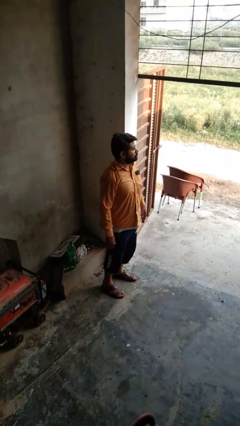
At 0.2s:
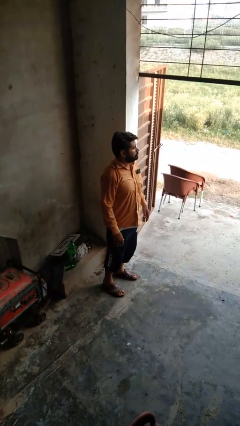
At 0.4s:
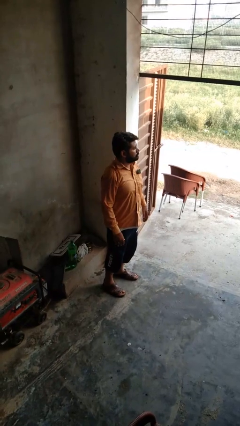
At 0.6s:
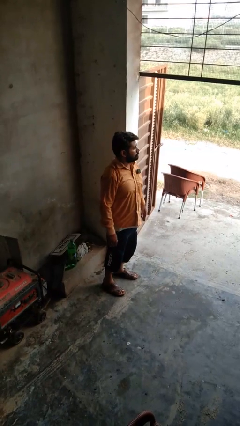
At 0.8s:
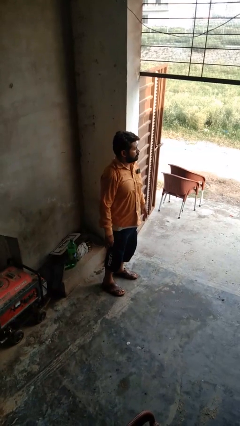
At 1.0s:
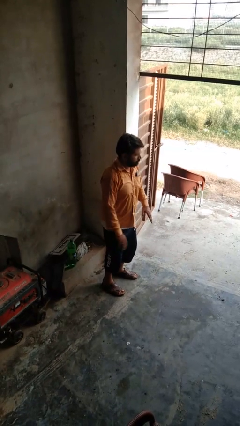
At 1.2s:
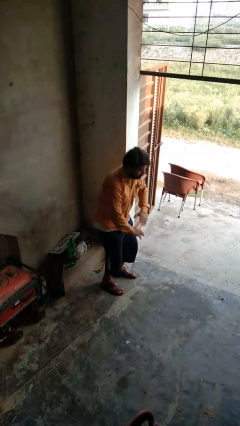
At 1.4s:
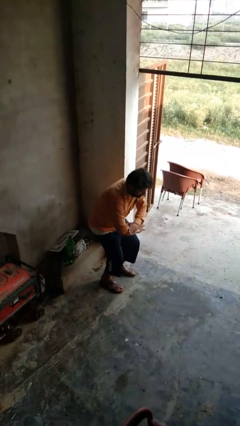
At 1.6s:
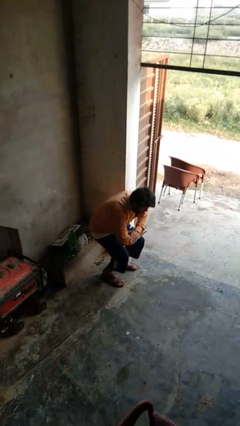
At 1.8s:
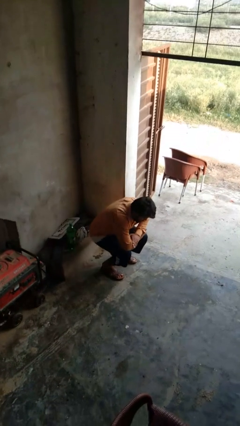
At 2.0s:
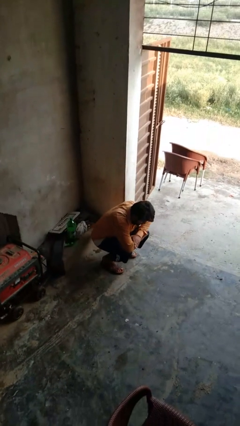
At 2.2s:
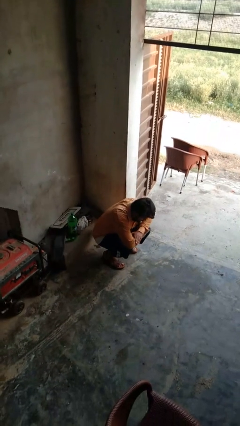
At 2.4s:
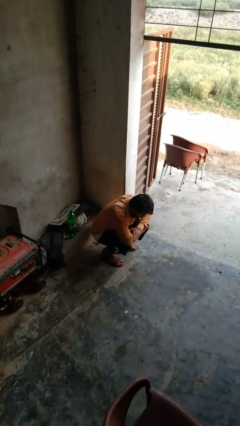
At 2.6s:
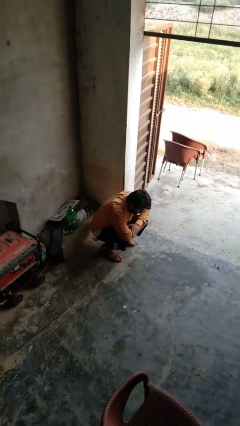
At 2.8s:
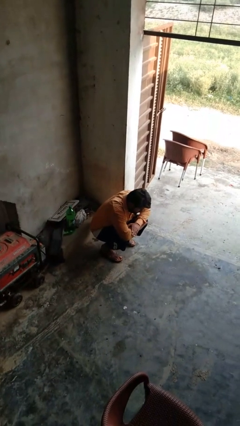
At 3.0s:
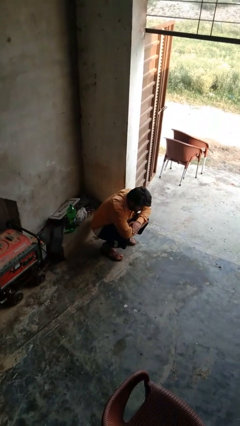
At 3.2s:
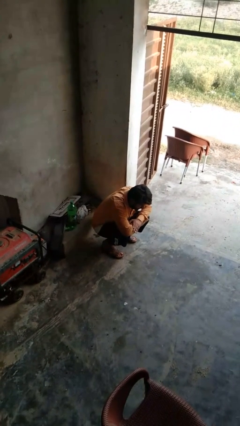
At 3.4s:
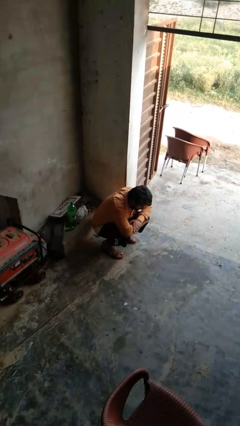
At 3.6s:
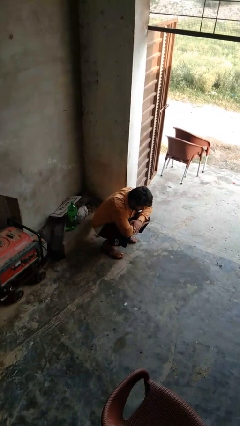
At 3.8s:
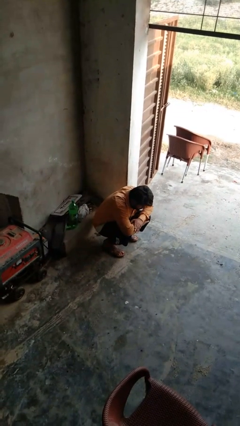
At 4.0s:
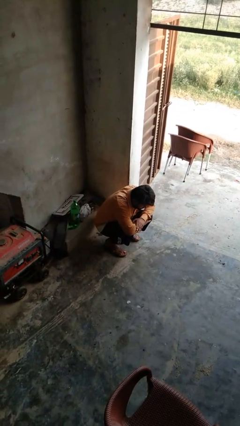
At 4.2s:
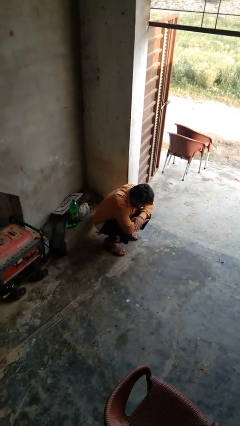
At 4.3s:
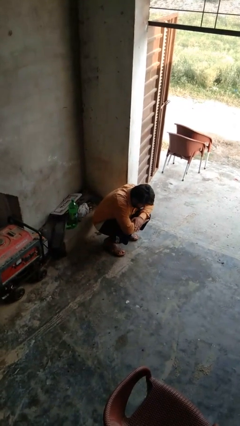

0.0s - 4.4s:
person squats

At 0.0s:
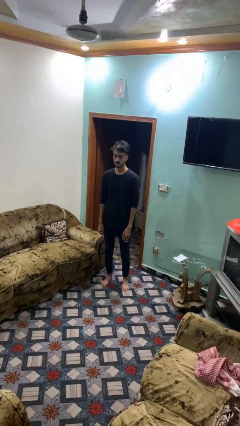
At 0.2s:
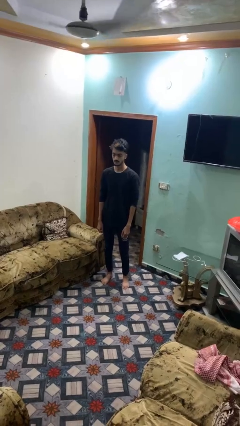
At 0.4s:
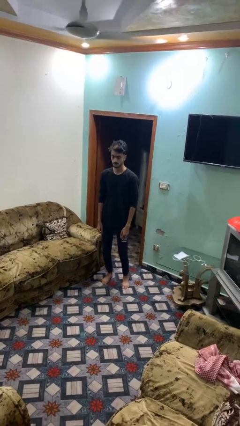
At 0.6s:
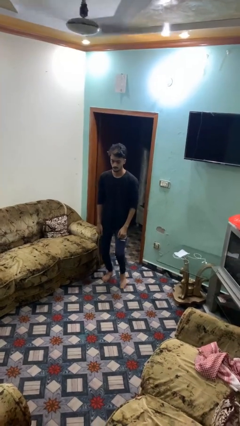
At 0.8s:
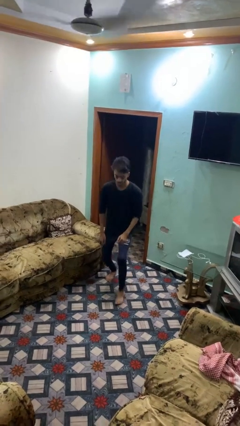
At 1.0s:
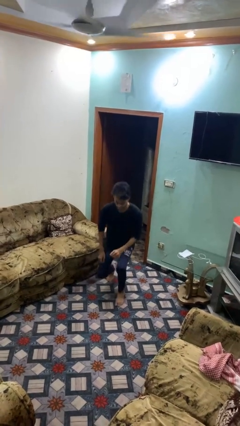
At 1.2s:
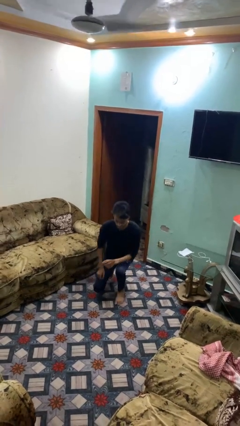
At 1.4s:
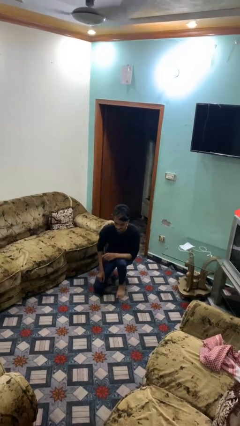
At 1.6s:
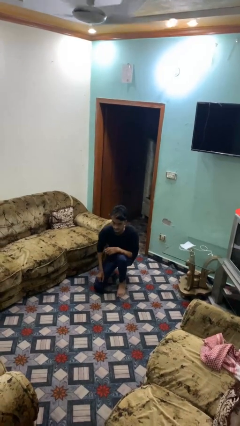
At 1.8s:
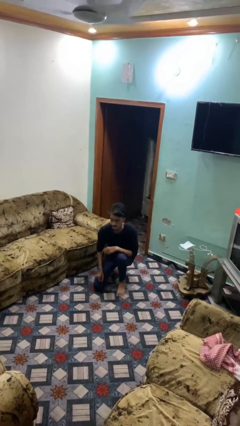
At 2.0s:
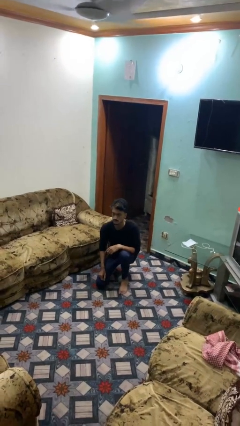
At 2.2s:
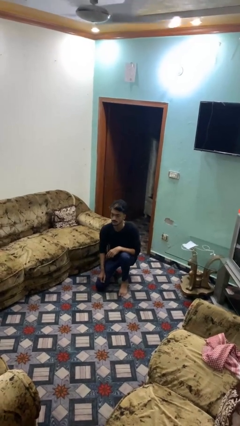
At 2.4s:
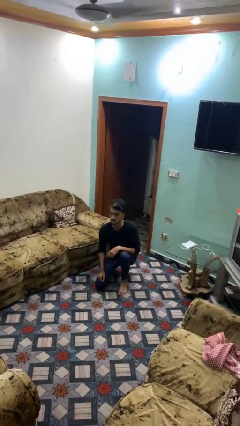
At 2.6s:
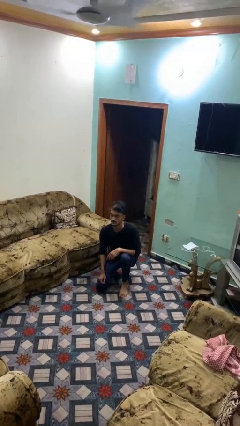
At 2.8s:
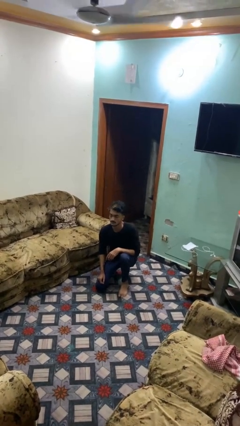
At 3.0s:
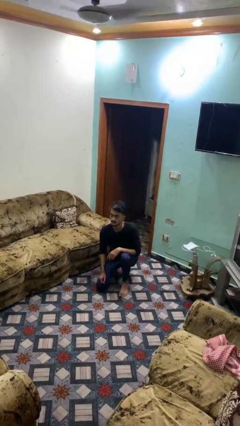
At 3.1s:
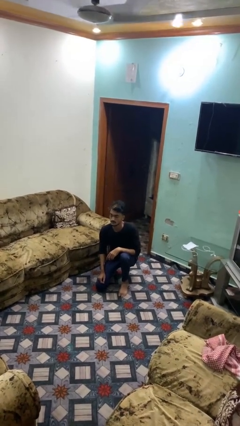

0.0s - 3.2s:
person kneels

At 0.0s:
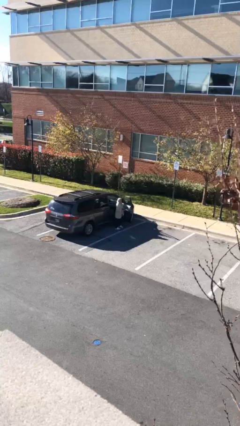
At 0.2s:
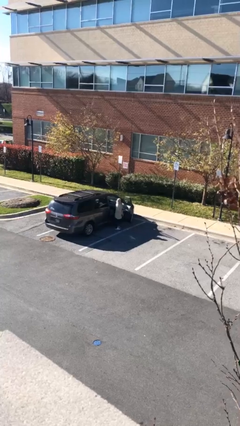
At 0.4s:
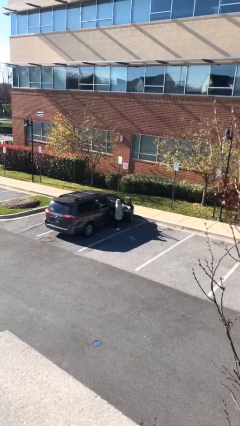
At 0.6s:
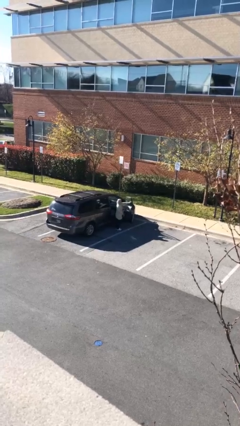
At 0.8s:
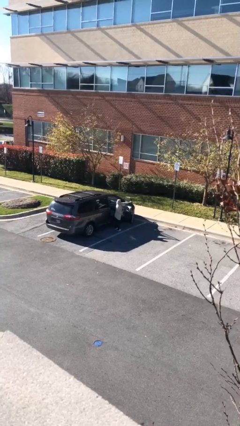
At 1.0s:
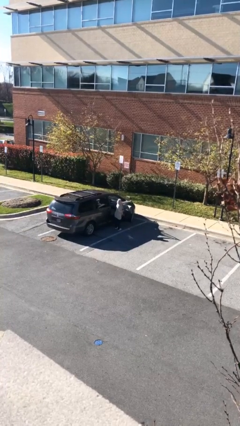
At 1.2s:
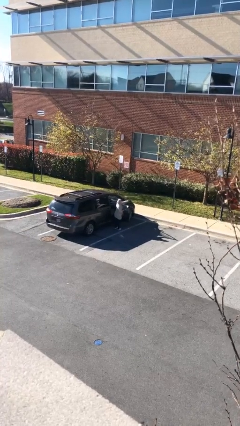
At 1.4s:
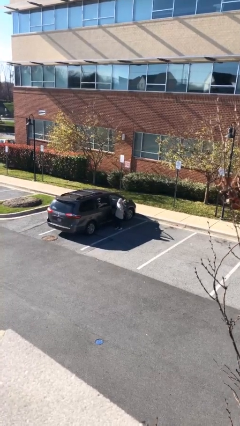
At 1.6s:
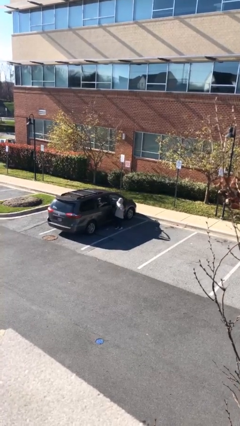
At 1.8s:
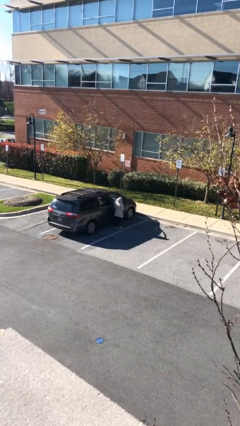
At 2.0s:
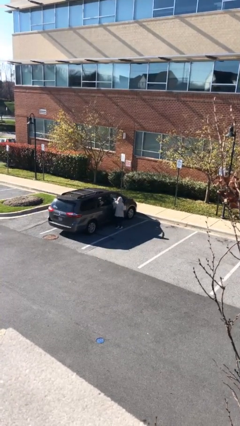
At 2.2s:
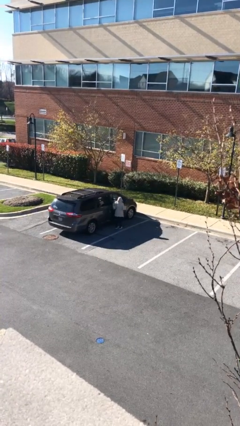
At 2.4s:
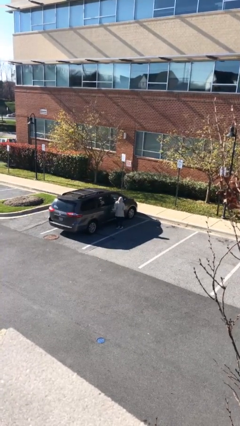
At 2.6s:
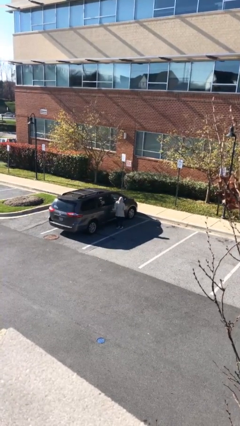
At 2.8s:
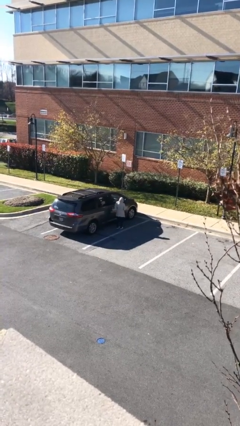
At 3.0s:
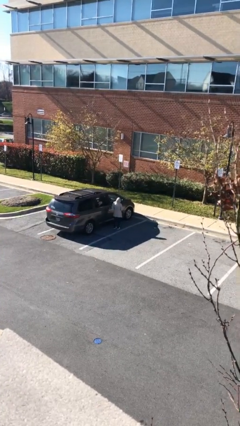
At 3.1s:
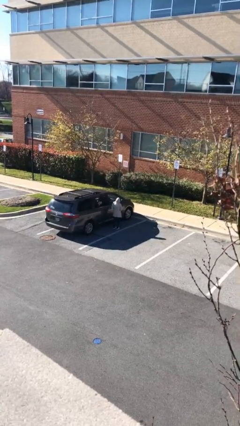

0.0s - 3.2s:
person closes car door

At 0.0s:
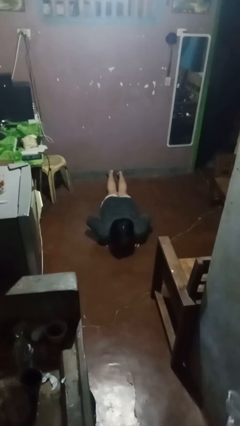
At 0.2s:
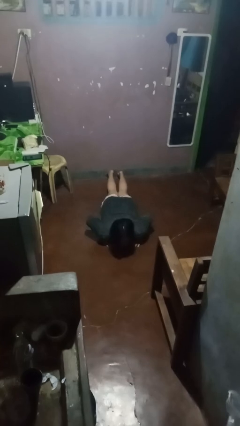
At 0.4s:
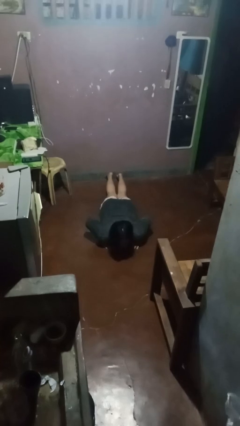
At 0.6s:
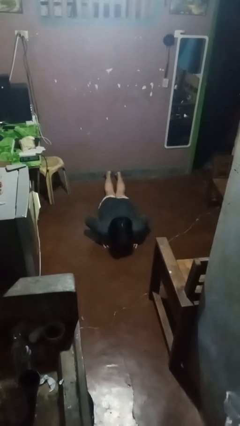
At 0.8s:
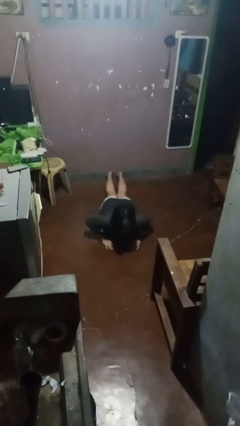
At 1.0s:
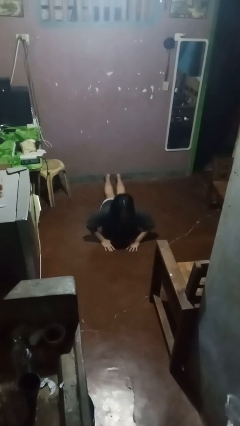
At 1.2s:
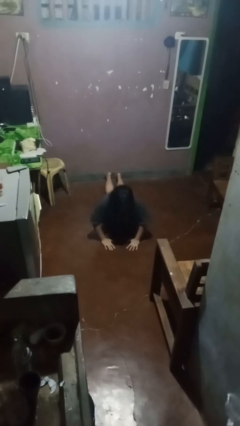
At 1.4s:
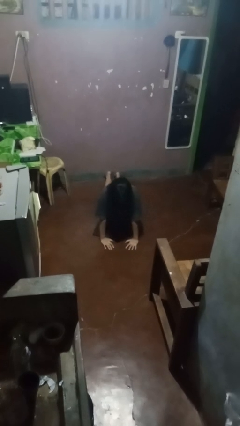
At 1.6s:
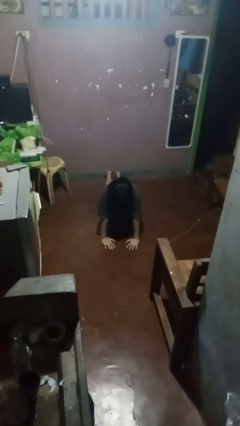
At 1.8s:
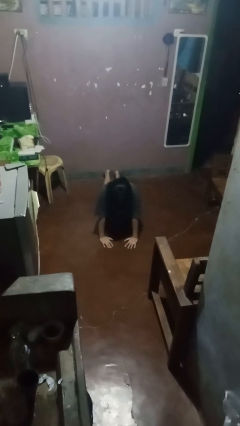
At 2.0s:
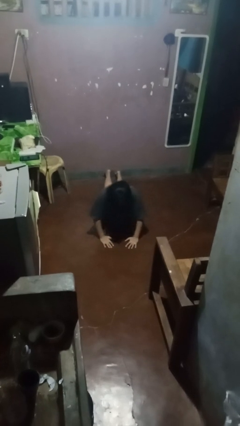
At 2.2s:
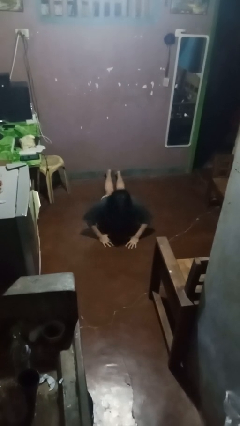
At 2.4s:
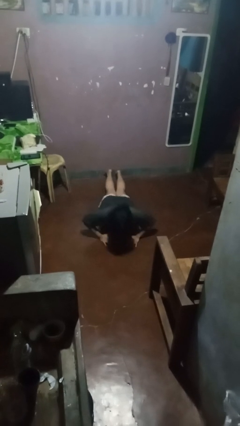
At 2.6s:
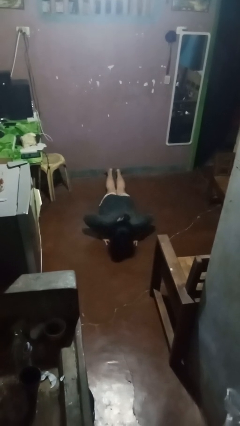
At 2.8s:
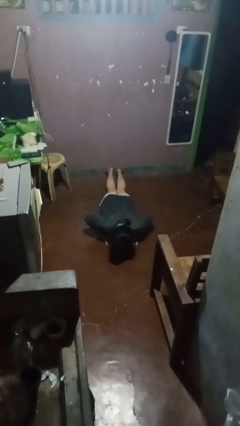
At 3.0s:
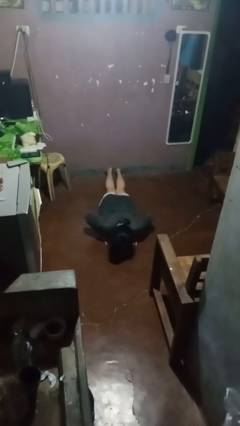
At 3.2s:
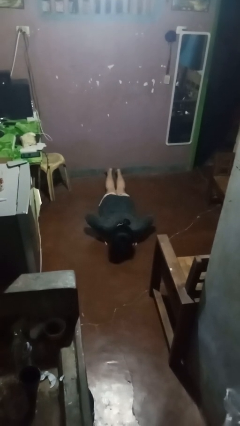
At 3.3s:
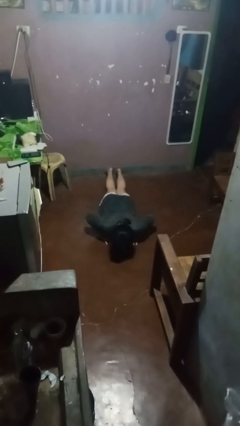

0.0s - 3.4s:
person exercises with pushup

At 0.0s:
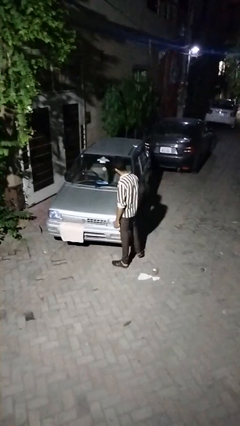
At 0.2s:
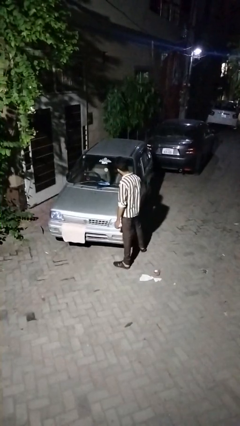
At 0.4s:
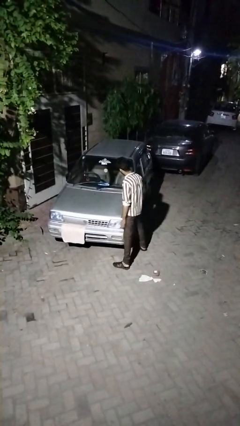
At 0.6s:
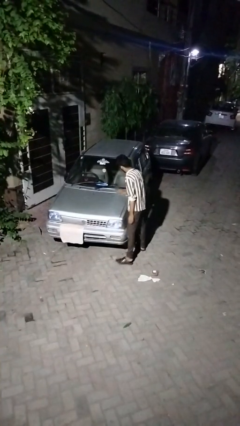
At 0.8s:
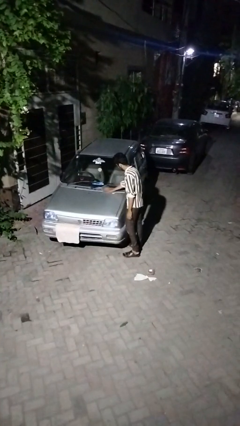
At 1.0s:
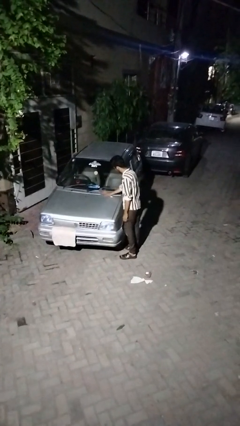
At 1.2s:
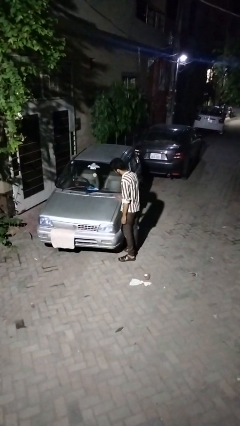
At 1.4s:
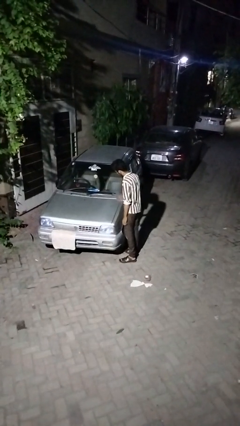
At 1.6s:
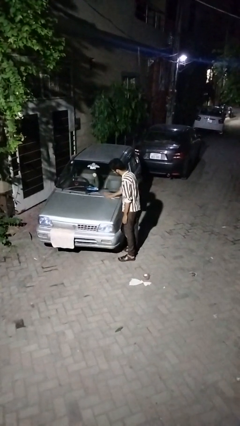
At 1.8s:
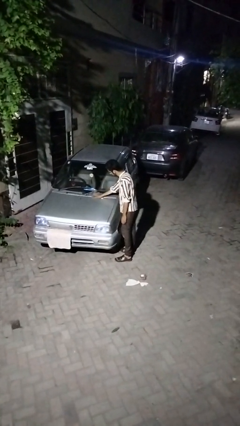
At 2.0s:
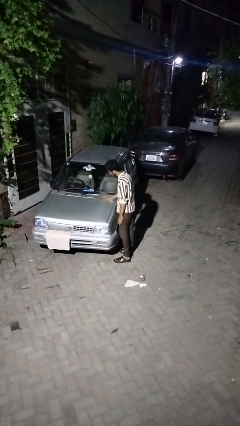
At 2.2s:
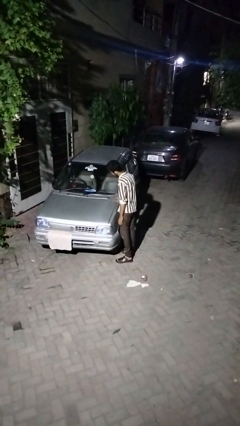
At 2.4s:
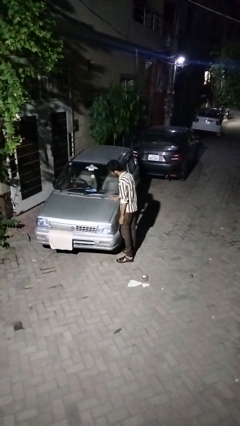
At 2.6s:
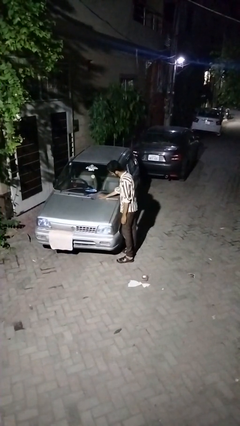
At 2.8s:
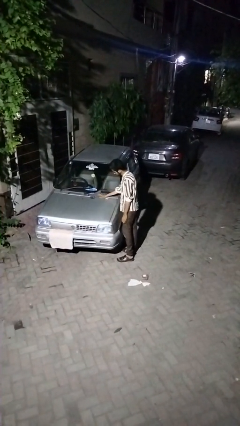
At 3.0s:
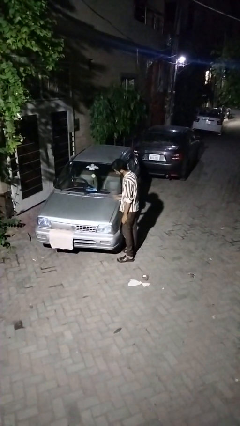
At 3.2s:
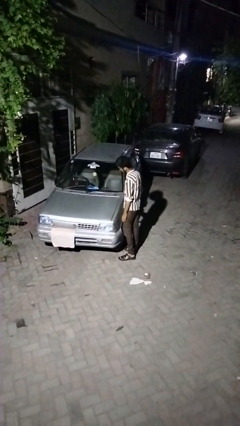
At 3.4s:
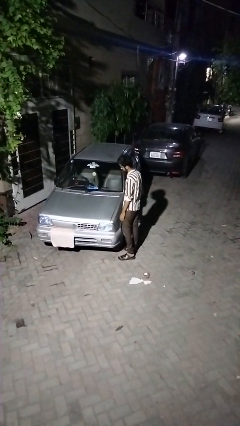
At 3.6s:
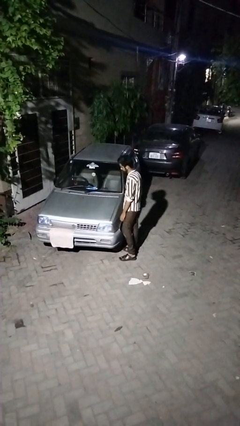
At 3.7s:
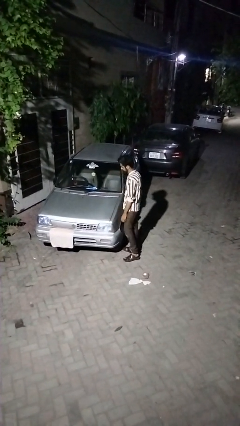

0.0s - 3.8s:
person polishes car with rag
